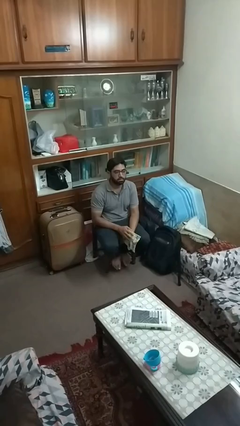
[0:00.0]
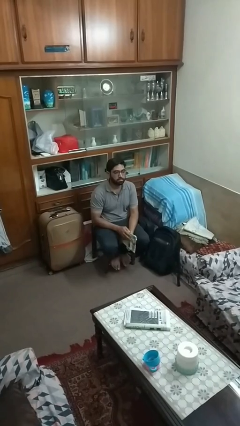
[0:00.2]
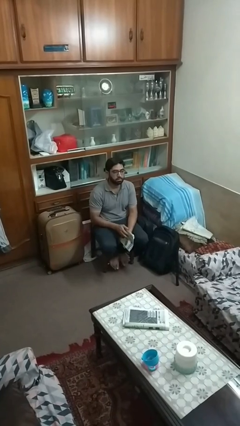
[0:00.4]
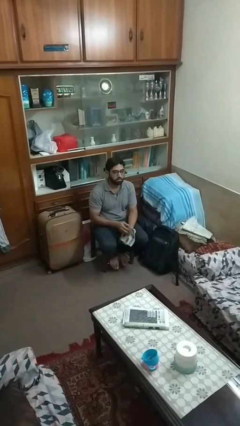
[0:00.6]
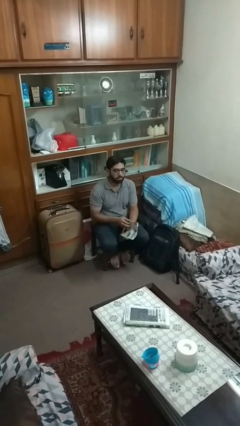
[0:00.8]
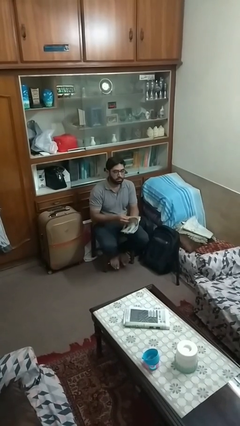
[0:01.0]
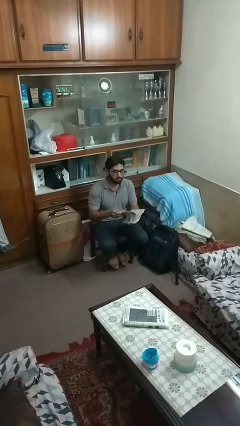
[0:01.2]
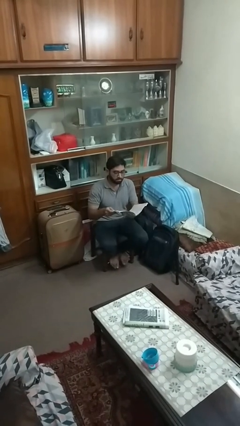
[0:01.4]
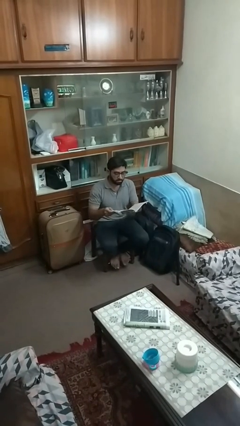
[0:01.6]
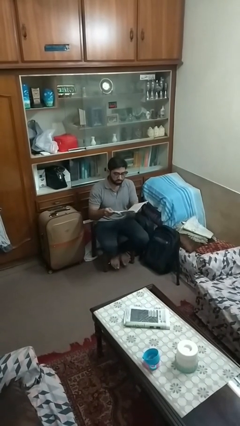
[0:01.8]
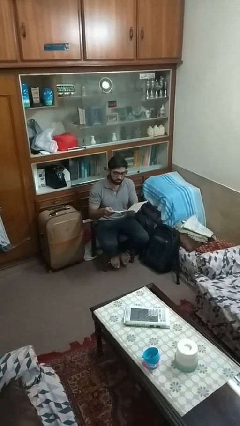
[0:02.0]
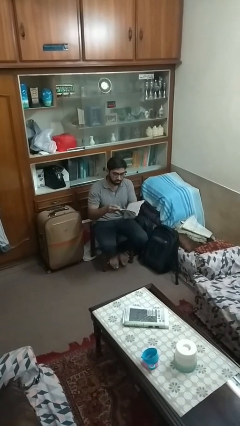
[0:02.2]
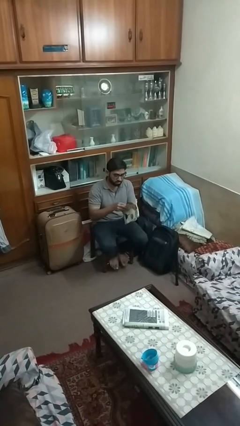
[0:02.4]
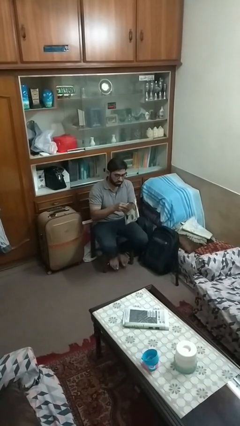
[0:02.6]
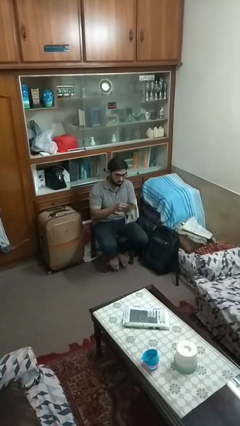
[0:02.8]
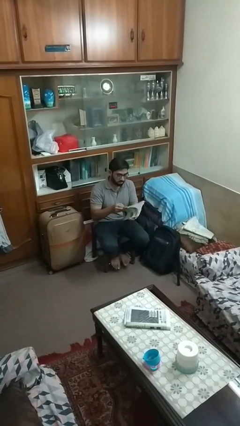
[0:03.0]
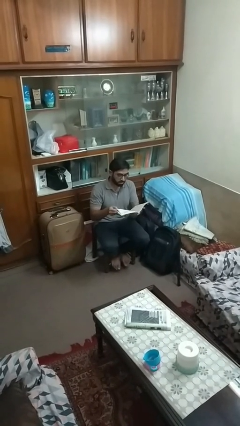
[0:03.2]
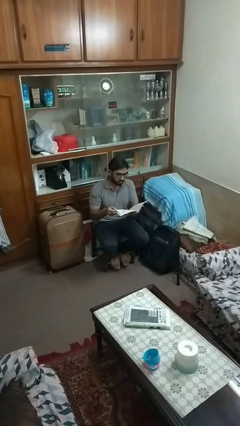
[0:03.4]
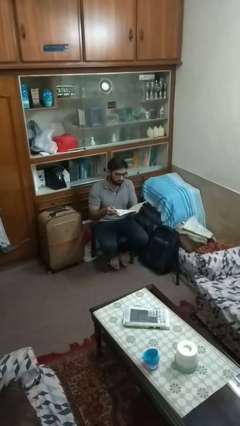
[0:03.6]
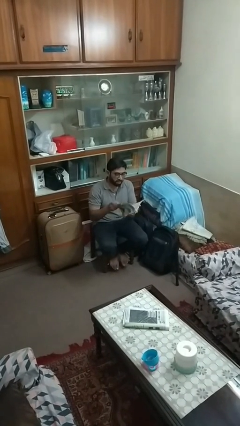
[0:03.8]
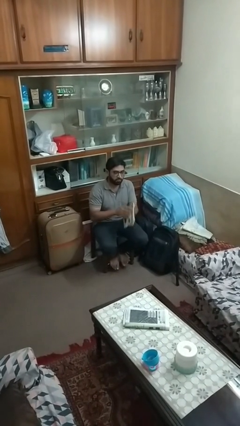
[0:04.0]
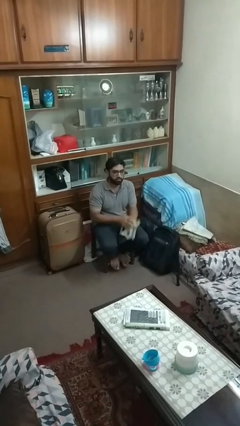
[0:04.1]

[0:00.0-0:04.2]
person reads magazine

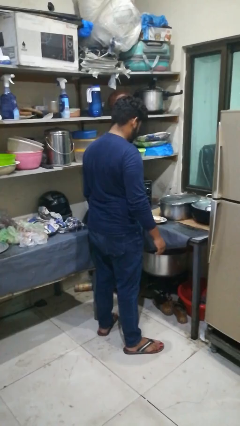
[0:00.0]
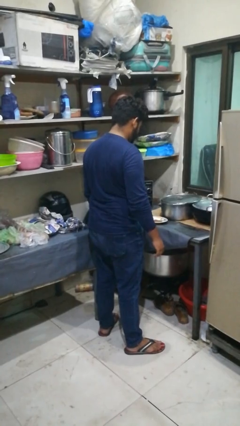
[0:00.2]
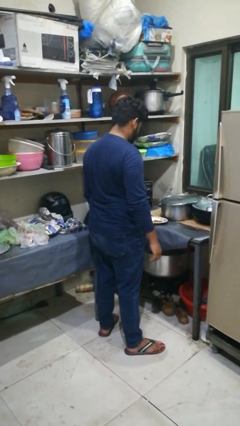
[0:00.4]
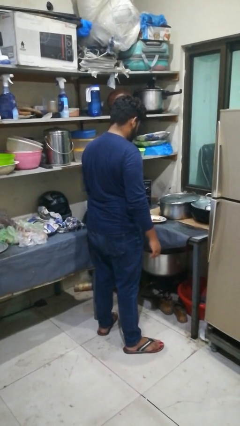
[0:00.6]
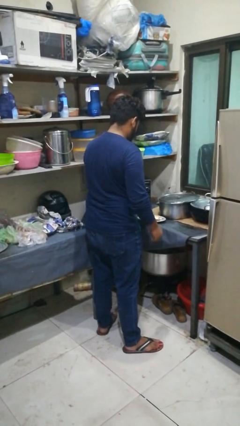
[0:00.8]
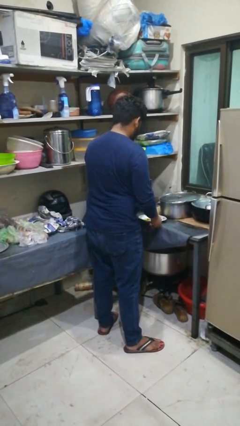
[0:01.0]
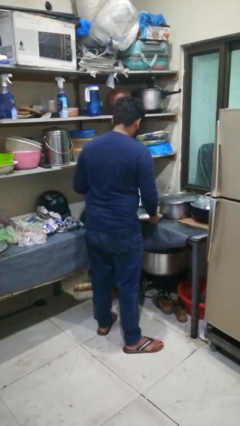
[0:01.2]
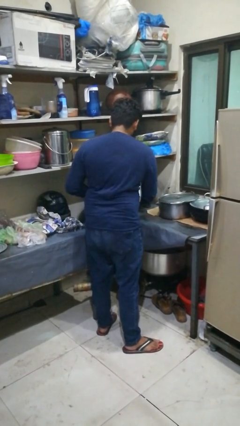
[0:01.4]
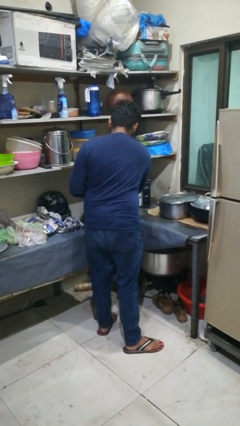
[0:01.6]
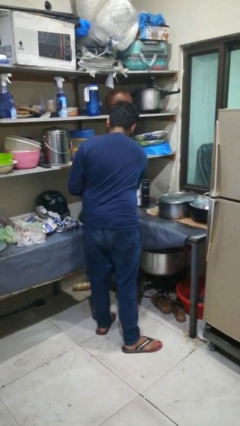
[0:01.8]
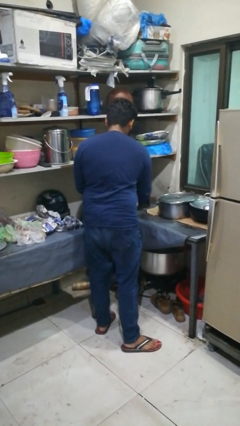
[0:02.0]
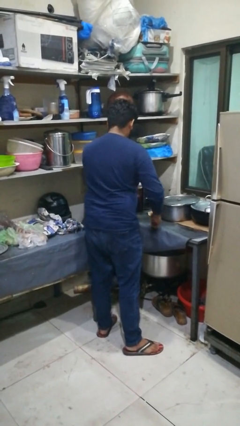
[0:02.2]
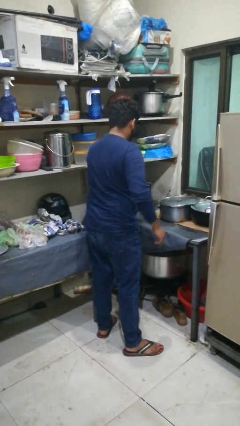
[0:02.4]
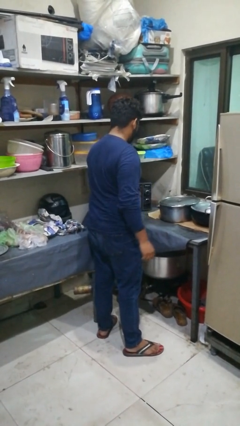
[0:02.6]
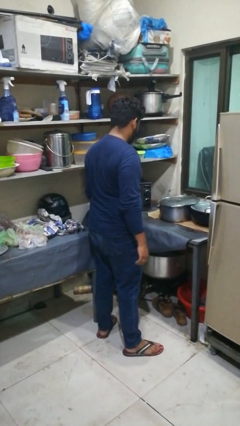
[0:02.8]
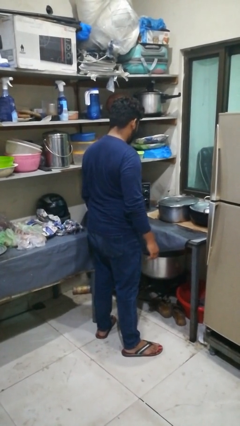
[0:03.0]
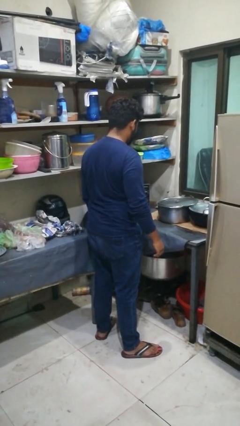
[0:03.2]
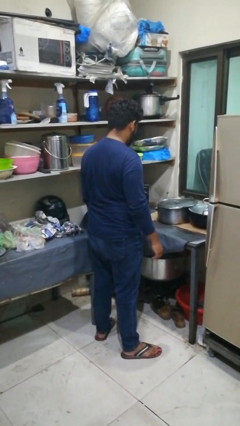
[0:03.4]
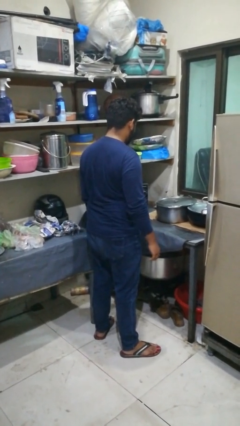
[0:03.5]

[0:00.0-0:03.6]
person puts object into oven

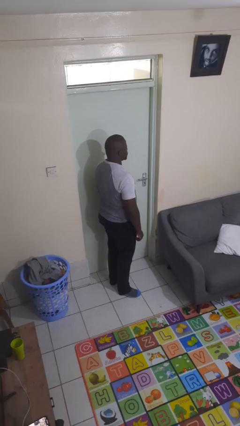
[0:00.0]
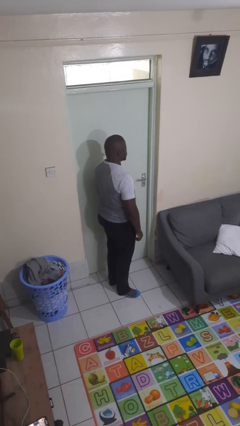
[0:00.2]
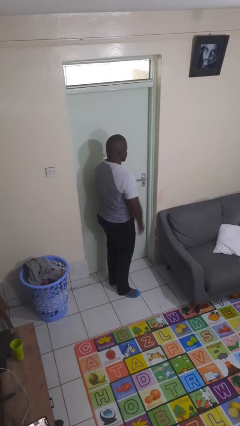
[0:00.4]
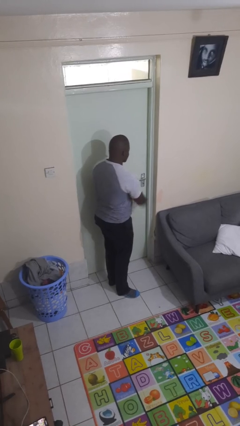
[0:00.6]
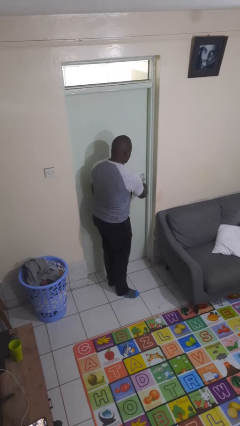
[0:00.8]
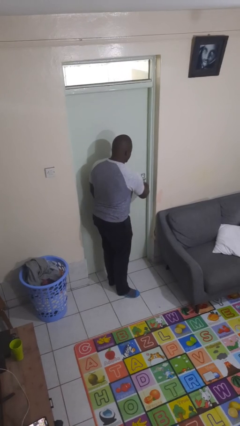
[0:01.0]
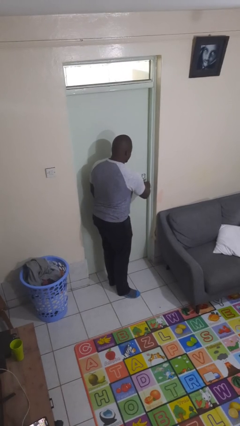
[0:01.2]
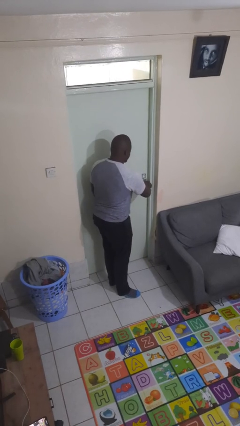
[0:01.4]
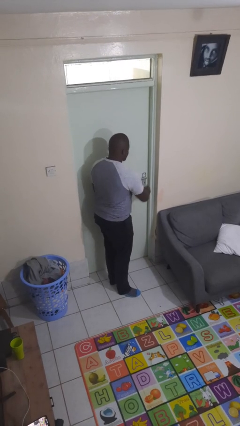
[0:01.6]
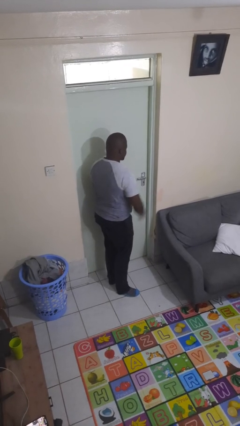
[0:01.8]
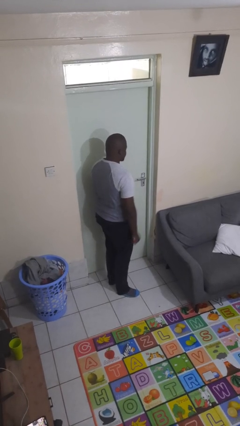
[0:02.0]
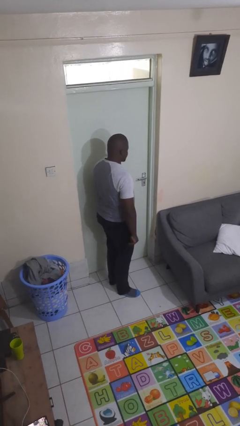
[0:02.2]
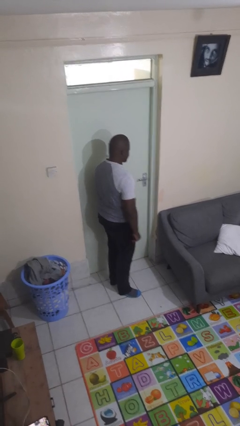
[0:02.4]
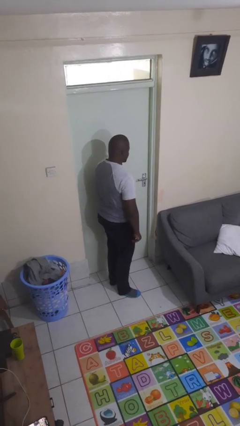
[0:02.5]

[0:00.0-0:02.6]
person unlocks door with keys

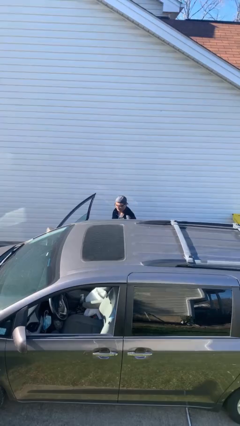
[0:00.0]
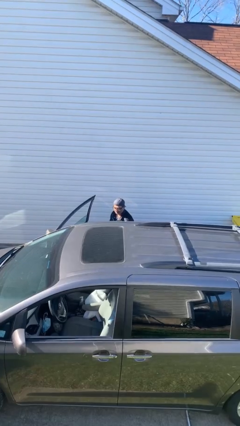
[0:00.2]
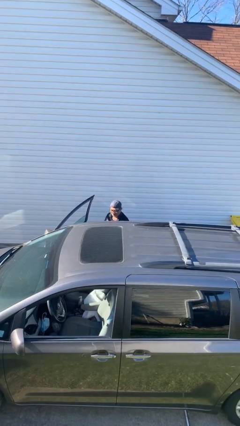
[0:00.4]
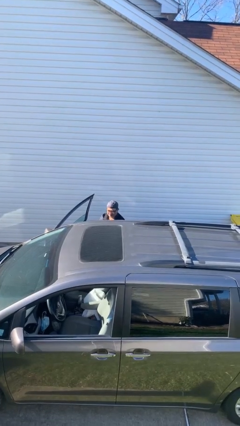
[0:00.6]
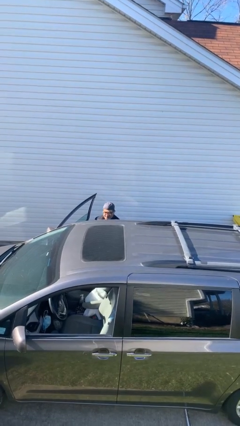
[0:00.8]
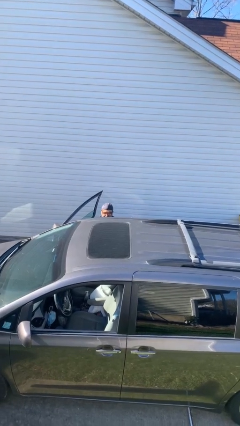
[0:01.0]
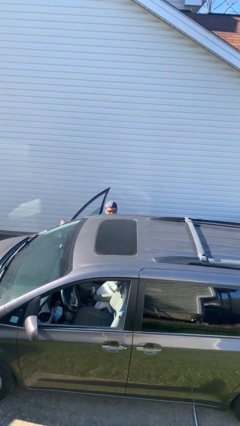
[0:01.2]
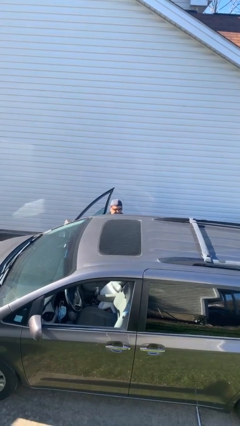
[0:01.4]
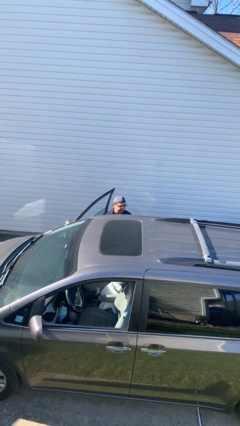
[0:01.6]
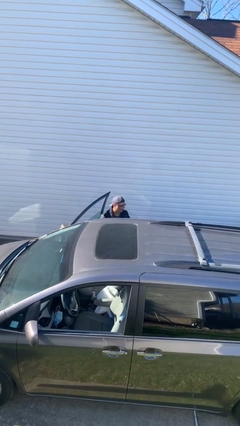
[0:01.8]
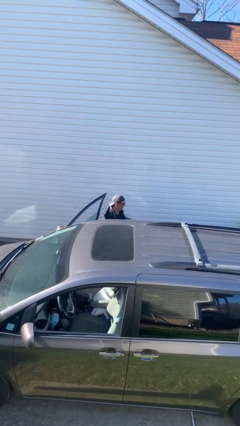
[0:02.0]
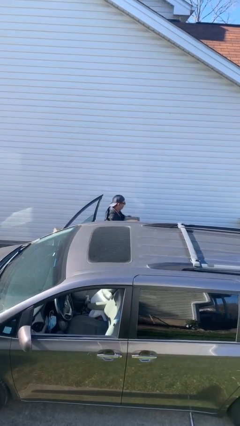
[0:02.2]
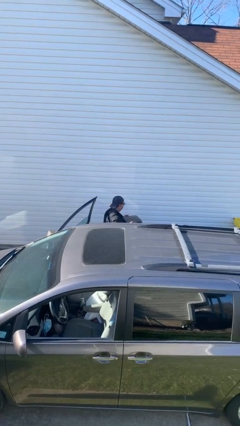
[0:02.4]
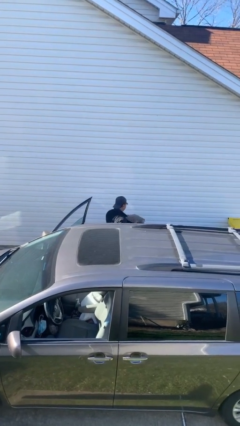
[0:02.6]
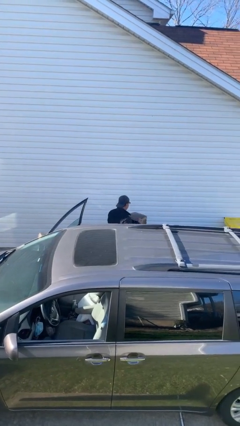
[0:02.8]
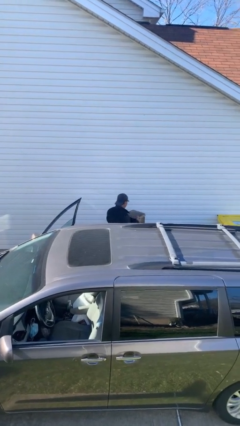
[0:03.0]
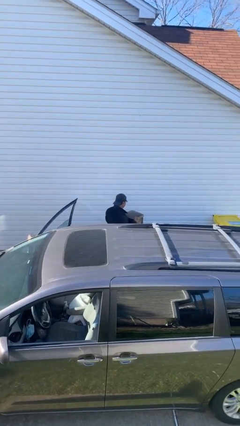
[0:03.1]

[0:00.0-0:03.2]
person unloads car

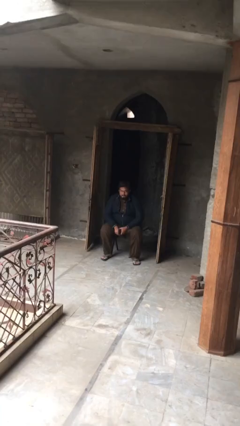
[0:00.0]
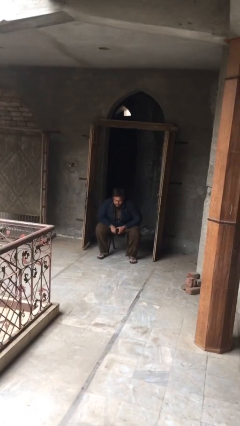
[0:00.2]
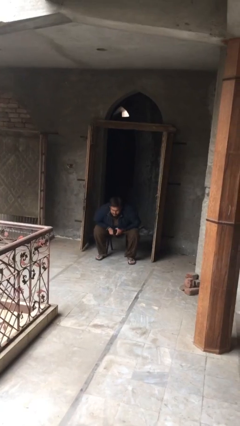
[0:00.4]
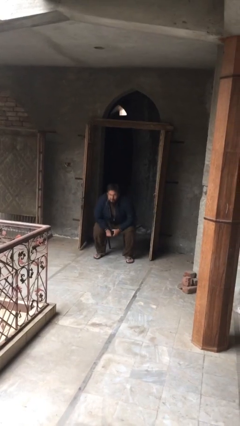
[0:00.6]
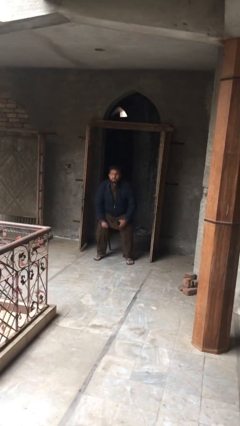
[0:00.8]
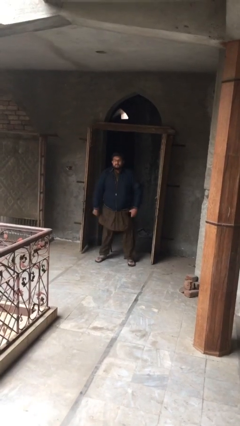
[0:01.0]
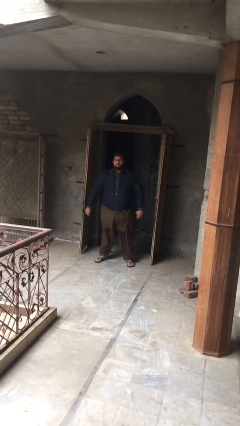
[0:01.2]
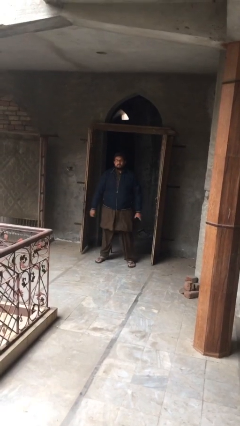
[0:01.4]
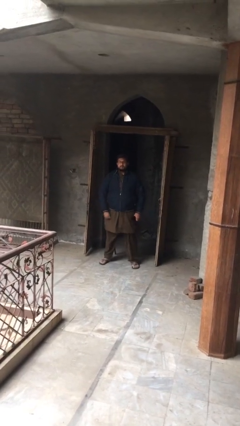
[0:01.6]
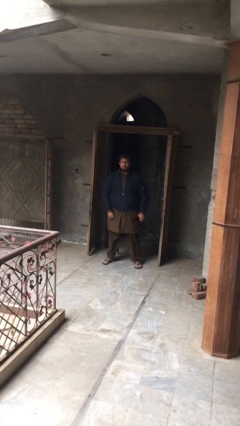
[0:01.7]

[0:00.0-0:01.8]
person stands up

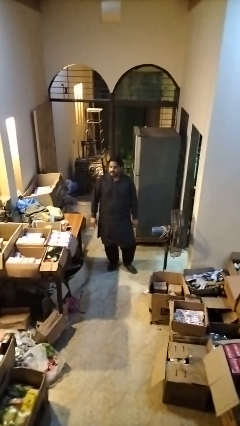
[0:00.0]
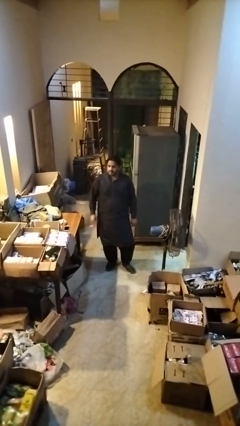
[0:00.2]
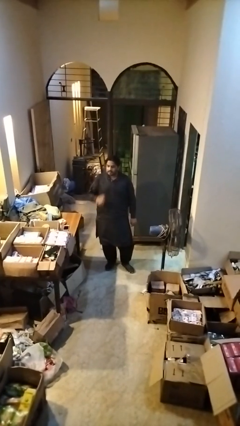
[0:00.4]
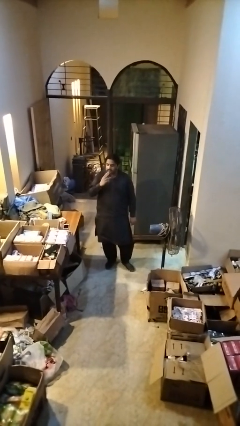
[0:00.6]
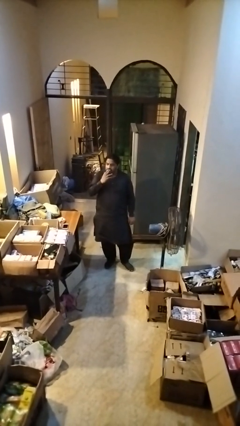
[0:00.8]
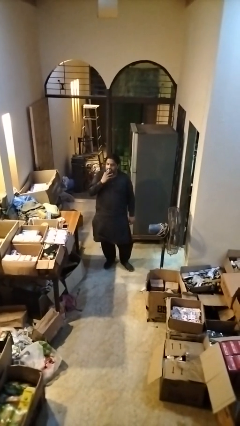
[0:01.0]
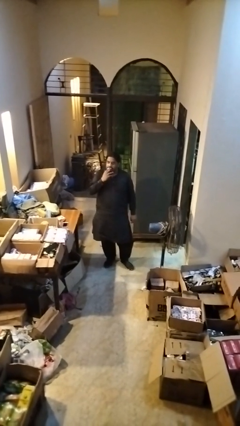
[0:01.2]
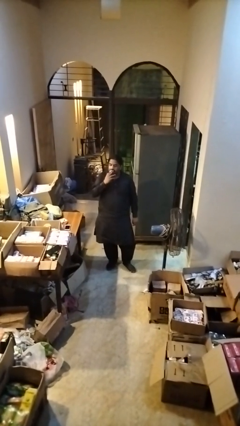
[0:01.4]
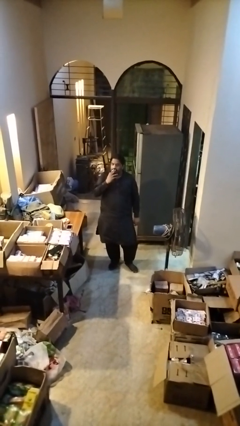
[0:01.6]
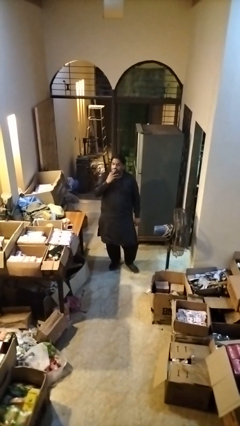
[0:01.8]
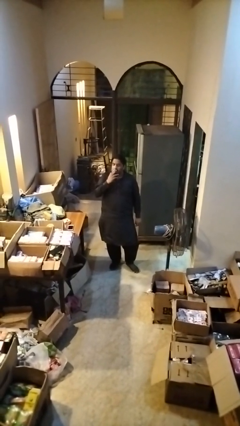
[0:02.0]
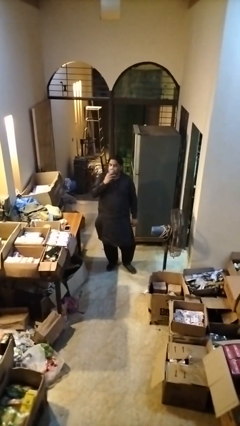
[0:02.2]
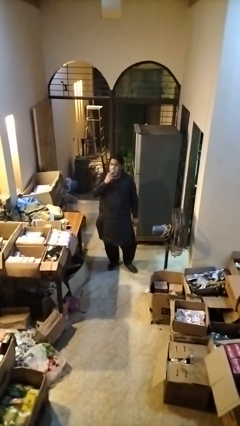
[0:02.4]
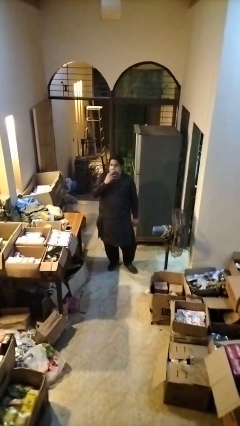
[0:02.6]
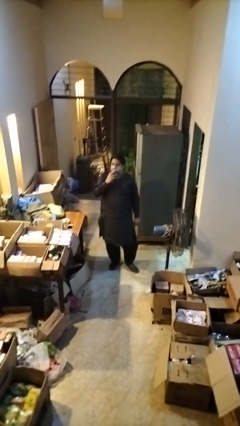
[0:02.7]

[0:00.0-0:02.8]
person vapes
